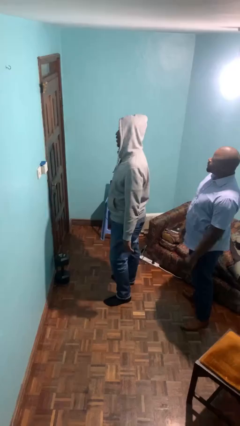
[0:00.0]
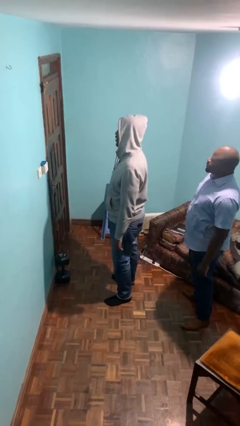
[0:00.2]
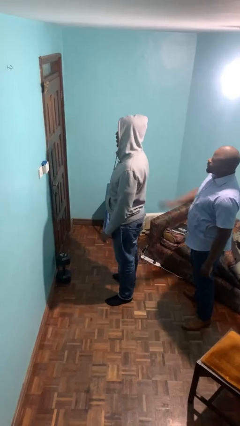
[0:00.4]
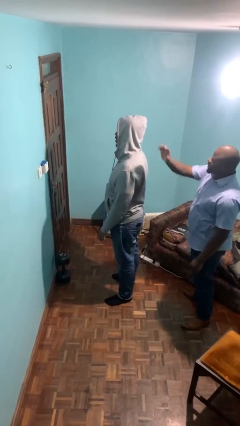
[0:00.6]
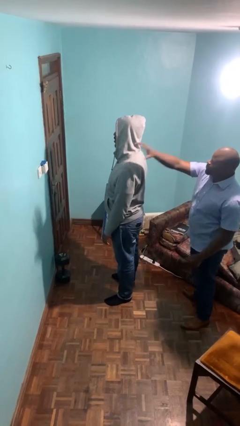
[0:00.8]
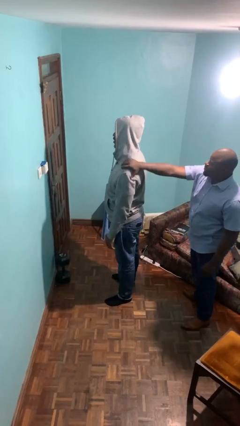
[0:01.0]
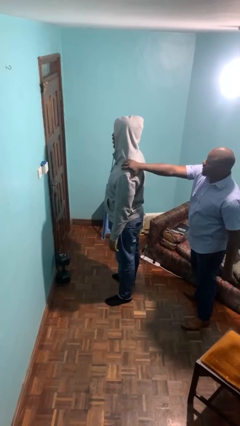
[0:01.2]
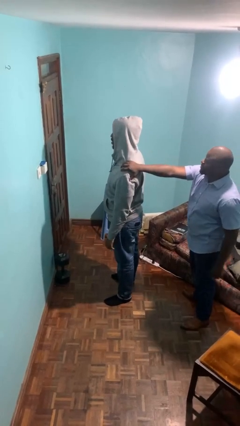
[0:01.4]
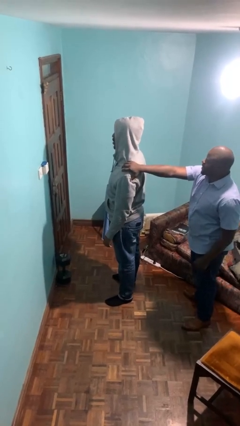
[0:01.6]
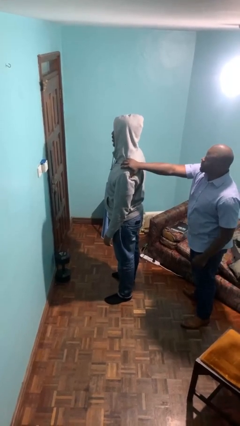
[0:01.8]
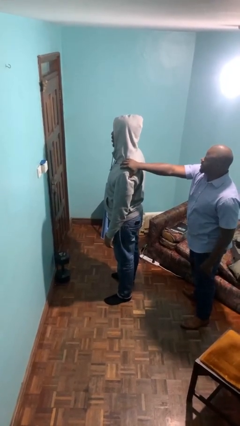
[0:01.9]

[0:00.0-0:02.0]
person grabs person by shoulder

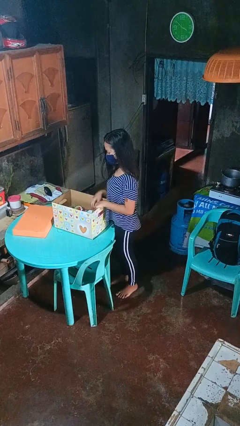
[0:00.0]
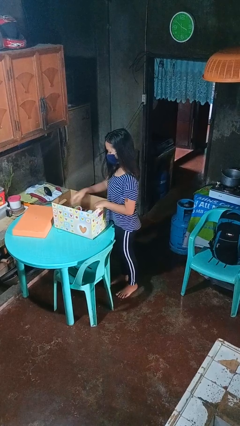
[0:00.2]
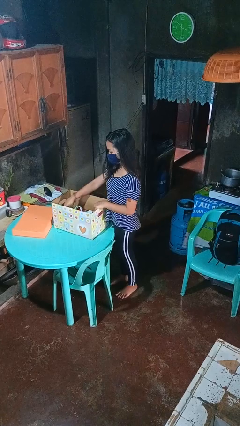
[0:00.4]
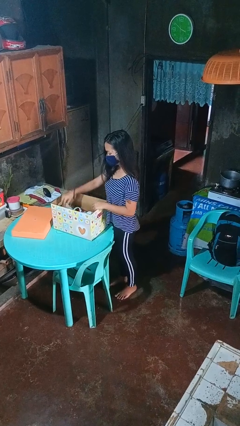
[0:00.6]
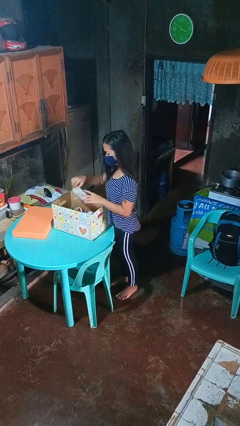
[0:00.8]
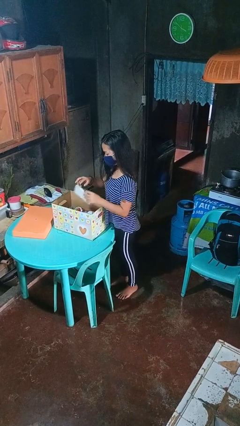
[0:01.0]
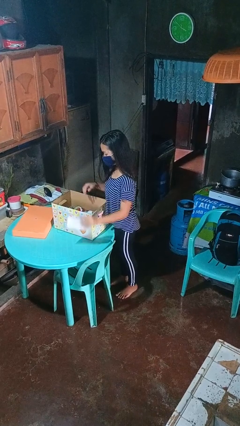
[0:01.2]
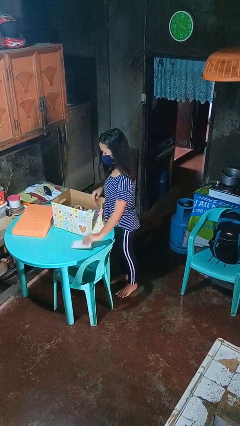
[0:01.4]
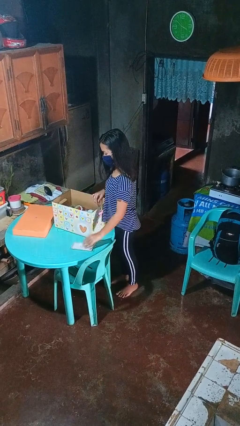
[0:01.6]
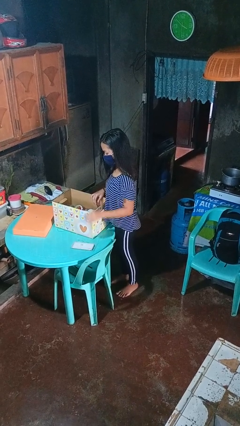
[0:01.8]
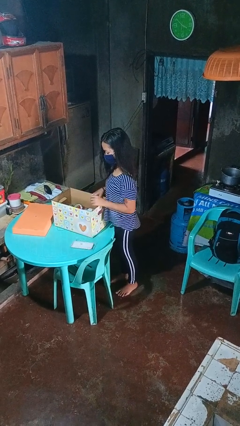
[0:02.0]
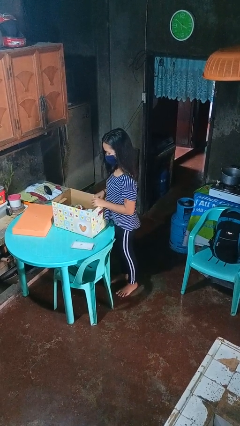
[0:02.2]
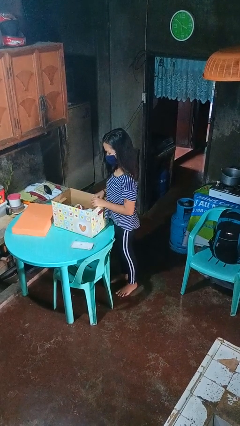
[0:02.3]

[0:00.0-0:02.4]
person takes object from box

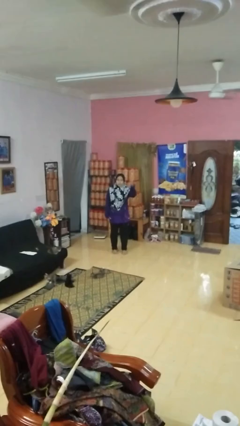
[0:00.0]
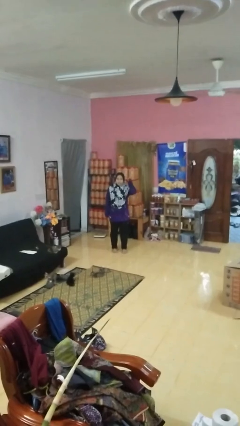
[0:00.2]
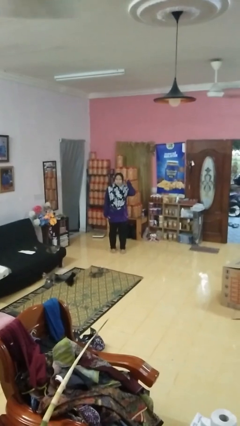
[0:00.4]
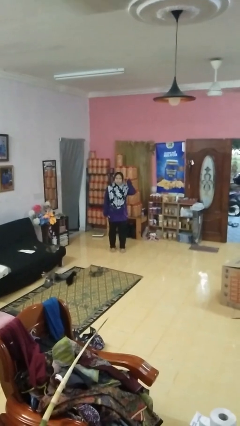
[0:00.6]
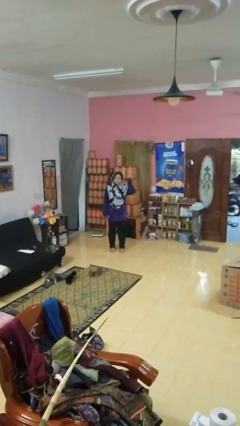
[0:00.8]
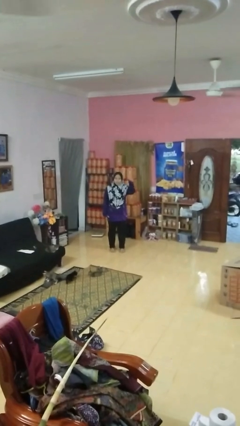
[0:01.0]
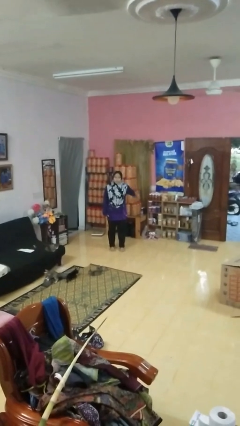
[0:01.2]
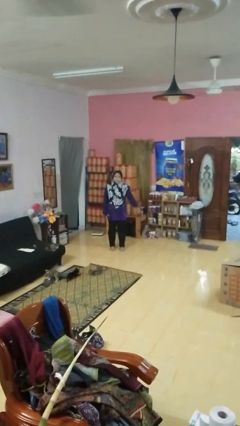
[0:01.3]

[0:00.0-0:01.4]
person gestures behind me

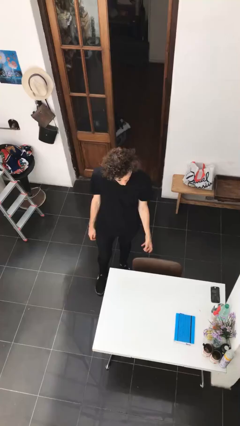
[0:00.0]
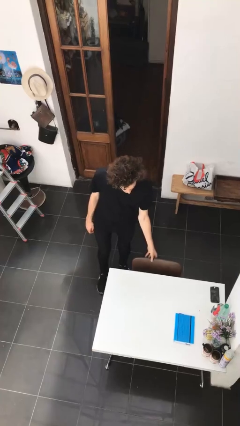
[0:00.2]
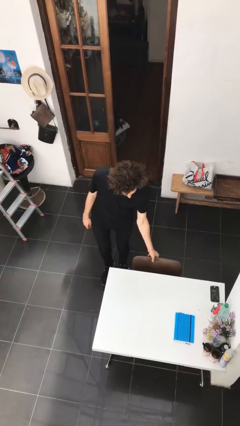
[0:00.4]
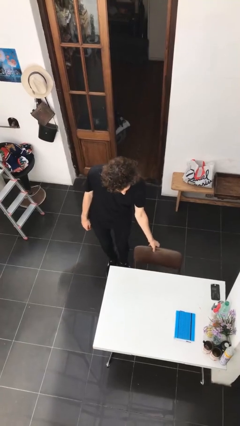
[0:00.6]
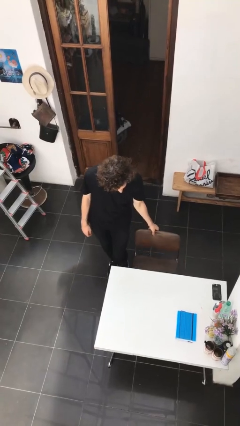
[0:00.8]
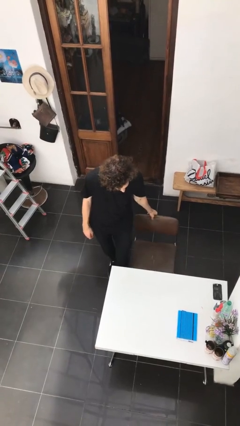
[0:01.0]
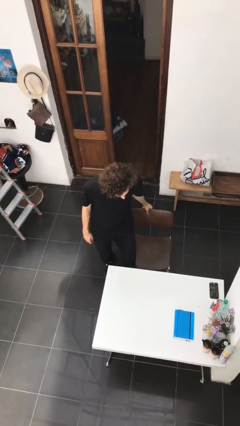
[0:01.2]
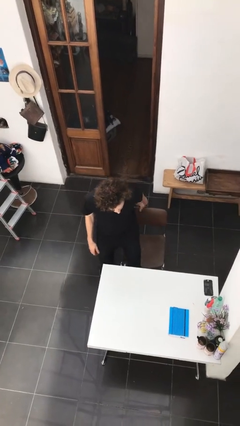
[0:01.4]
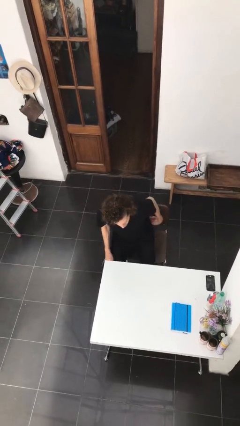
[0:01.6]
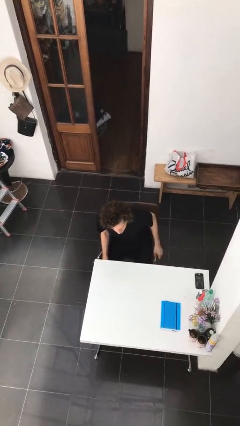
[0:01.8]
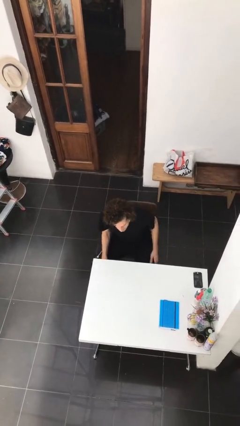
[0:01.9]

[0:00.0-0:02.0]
person sits down

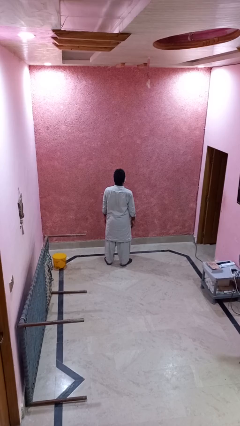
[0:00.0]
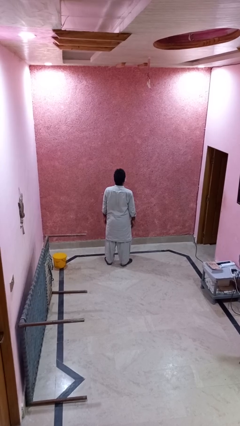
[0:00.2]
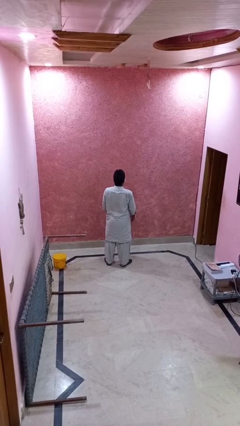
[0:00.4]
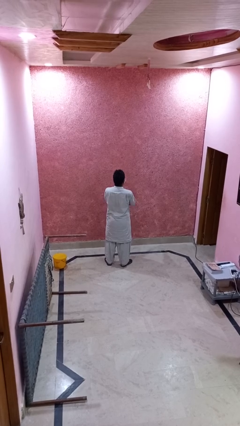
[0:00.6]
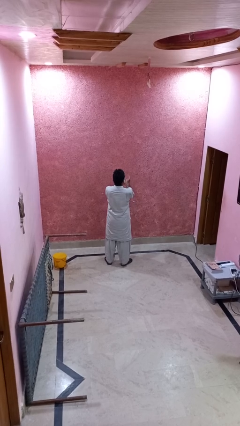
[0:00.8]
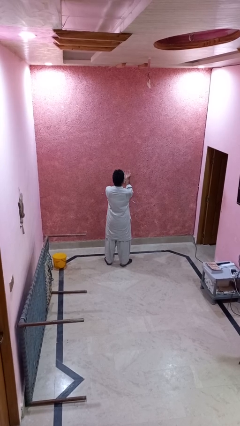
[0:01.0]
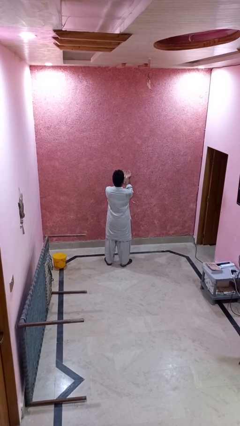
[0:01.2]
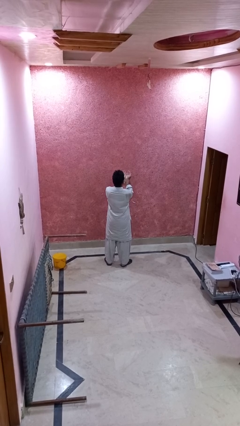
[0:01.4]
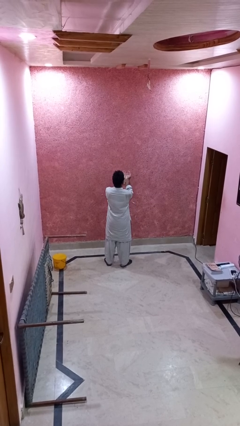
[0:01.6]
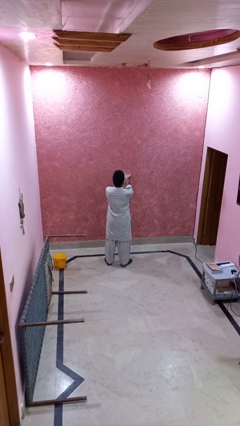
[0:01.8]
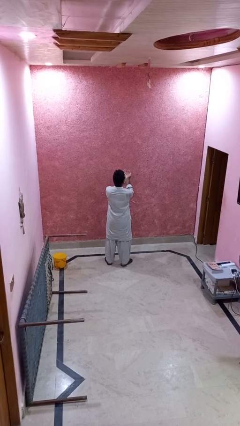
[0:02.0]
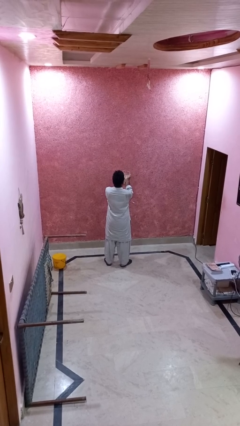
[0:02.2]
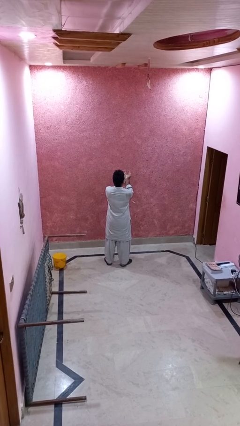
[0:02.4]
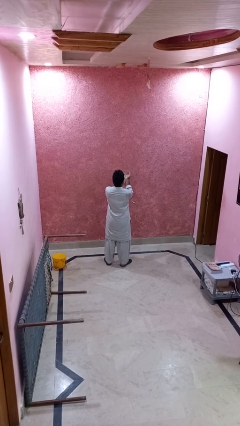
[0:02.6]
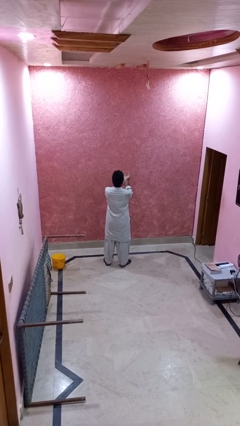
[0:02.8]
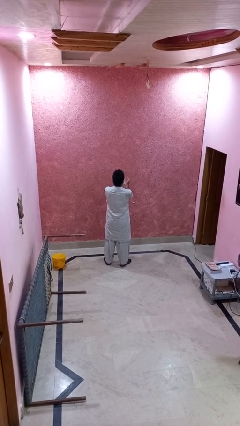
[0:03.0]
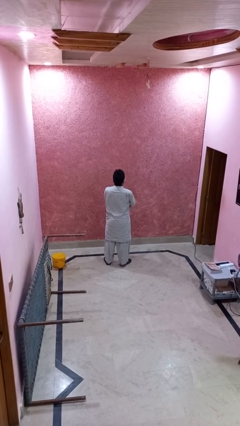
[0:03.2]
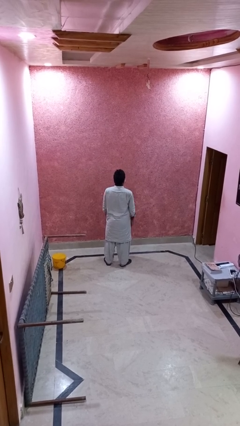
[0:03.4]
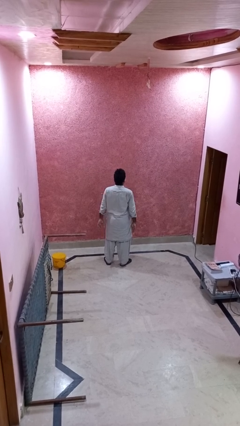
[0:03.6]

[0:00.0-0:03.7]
person prays

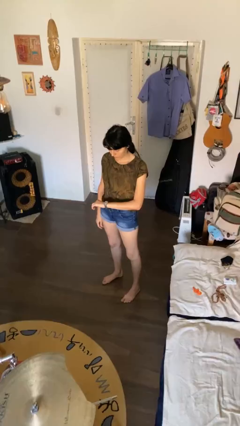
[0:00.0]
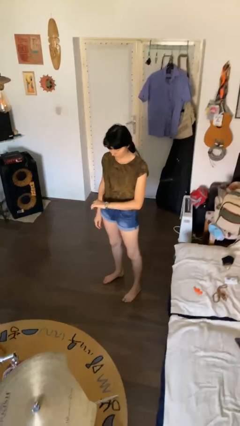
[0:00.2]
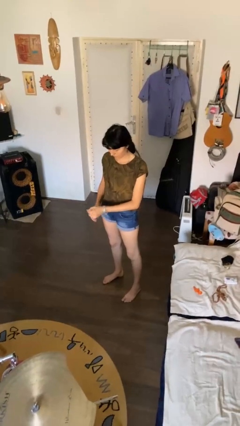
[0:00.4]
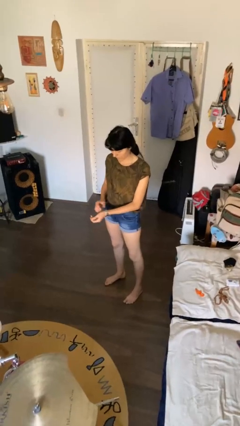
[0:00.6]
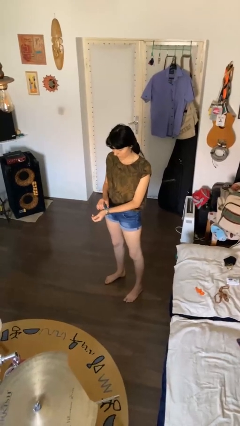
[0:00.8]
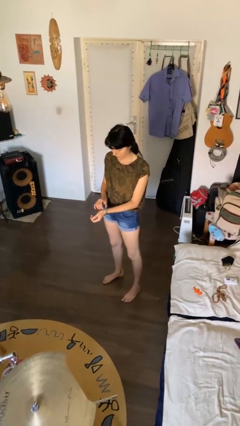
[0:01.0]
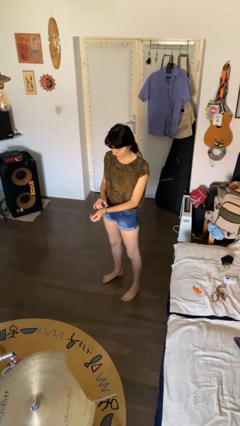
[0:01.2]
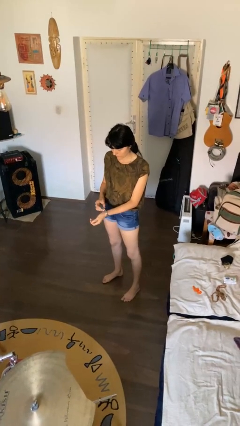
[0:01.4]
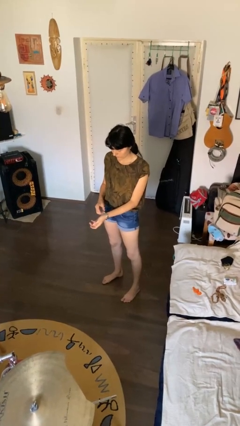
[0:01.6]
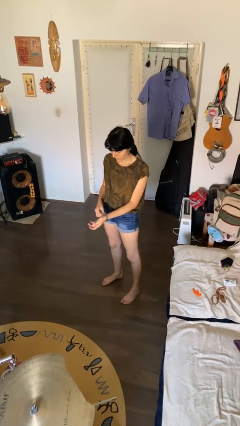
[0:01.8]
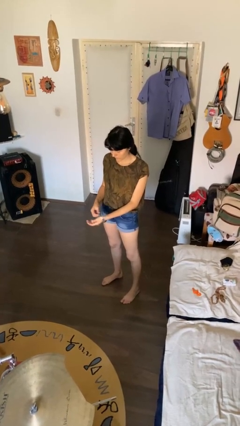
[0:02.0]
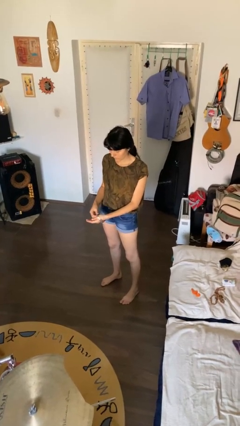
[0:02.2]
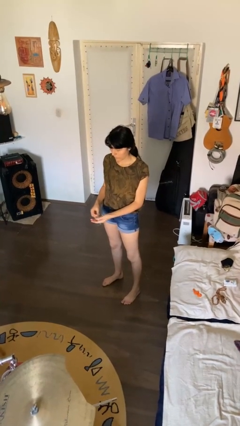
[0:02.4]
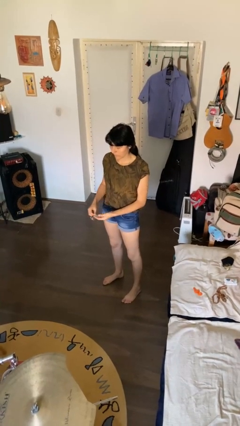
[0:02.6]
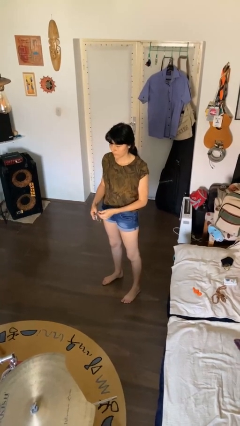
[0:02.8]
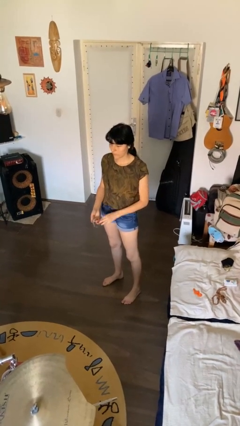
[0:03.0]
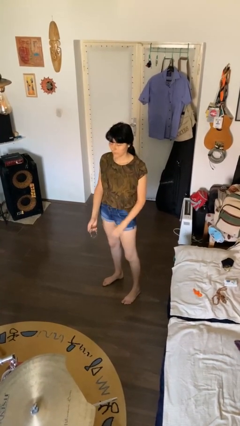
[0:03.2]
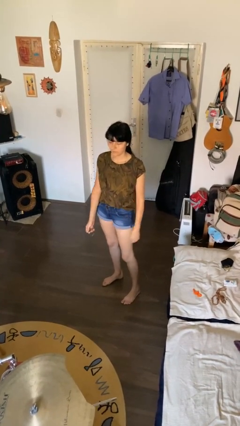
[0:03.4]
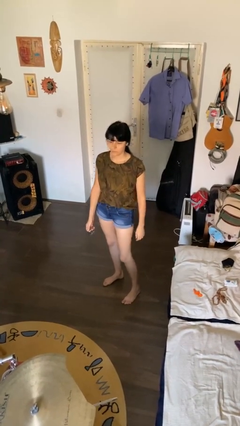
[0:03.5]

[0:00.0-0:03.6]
person takes off wristwatch

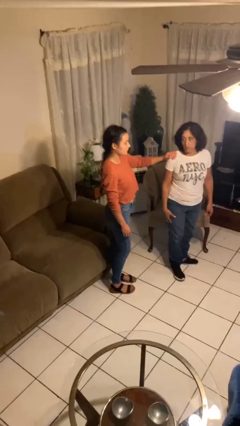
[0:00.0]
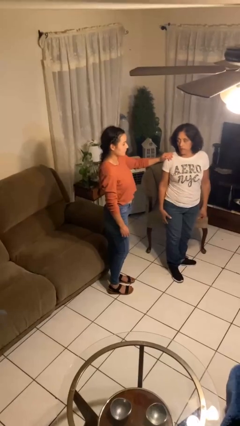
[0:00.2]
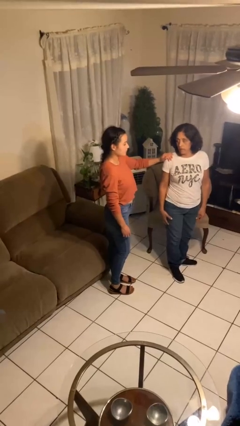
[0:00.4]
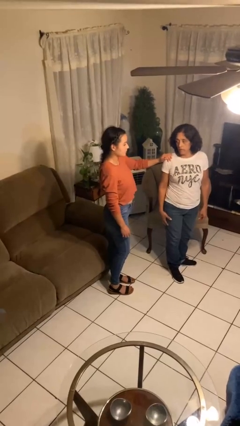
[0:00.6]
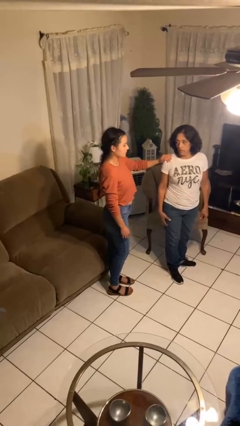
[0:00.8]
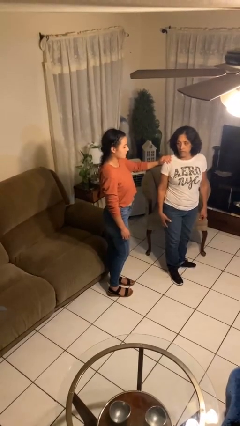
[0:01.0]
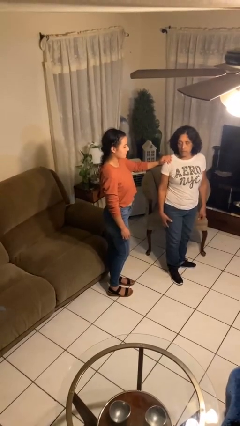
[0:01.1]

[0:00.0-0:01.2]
person spins person around

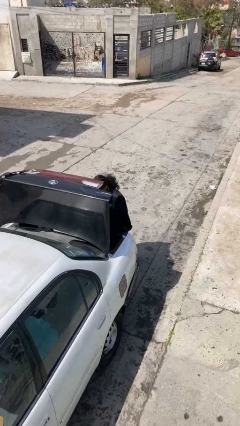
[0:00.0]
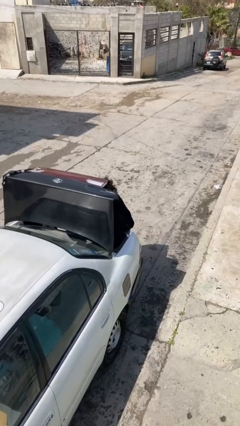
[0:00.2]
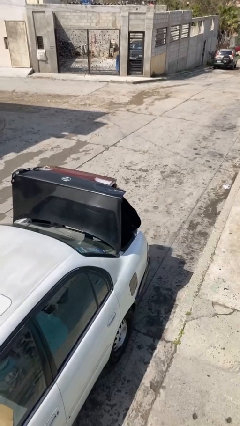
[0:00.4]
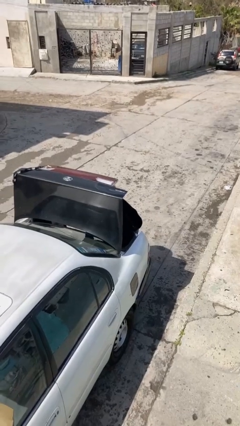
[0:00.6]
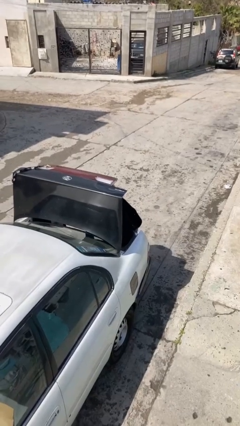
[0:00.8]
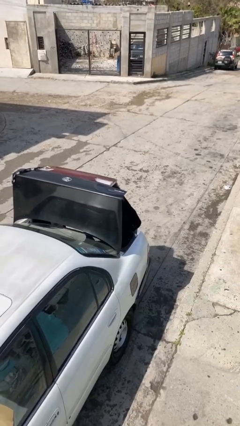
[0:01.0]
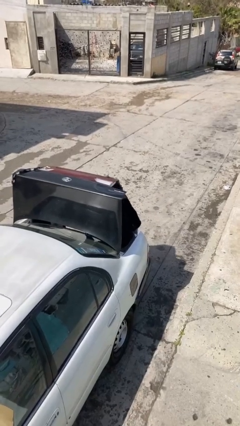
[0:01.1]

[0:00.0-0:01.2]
person loads car
